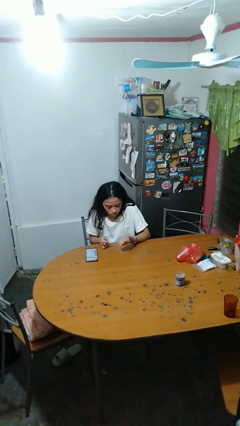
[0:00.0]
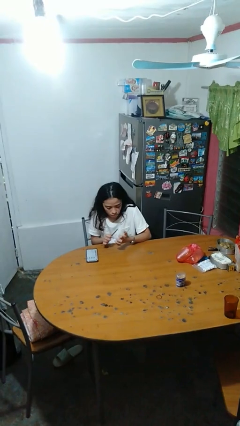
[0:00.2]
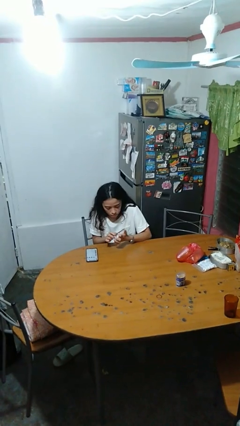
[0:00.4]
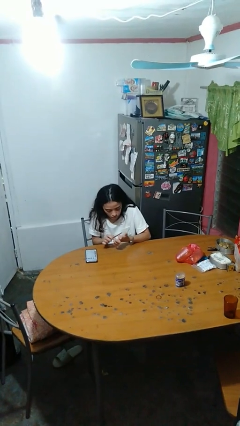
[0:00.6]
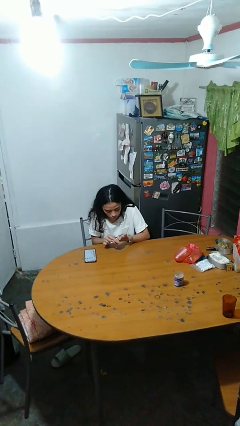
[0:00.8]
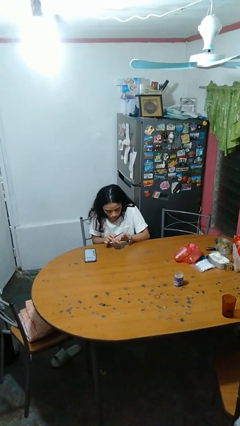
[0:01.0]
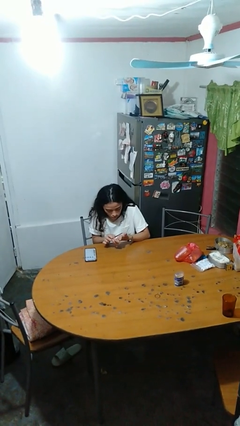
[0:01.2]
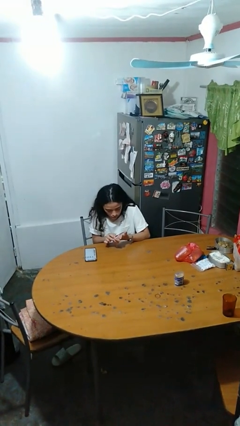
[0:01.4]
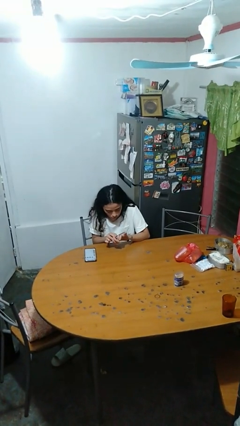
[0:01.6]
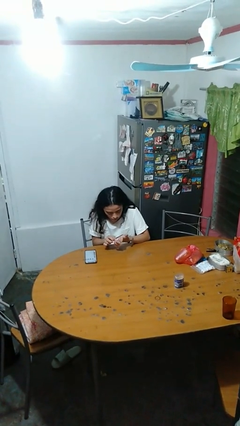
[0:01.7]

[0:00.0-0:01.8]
person files fingernails

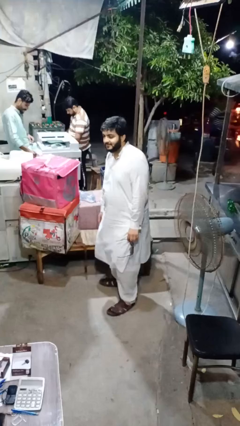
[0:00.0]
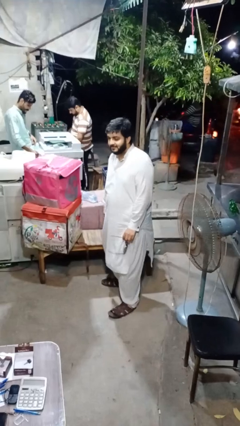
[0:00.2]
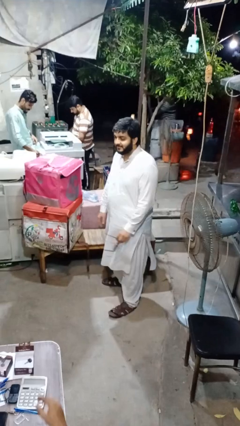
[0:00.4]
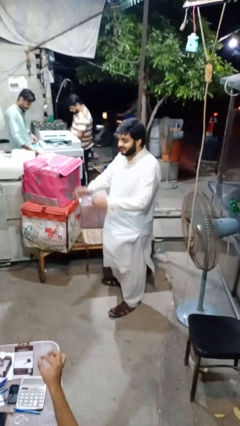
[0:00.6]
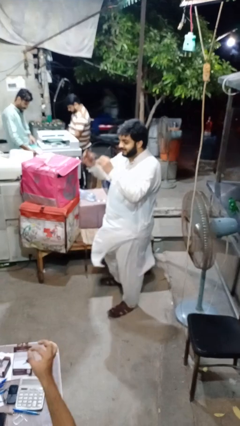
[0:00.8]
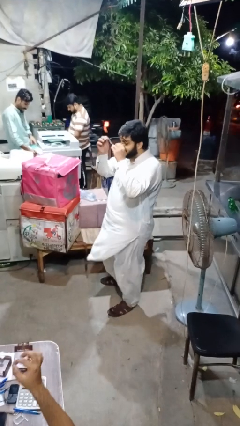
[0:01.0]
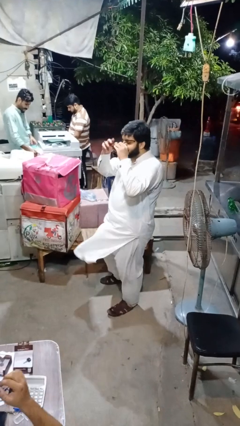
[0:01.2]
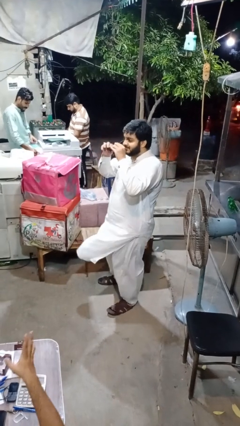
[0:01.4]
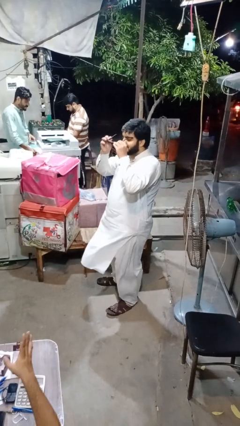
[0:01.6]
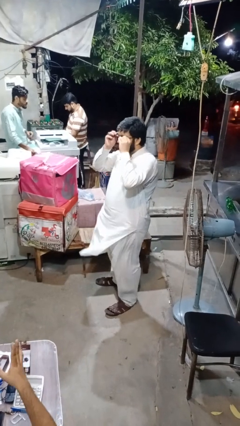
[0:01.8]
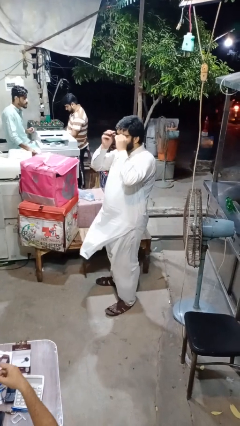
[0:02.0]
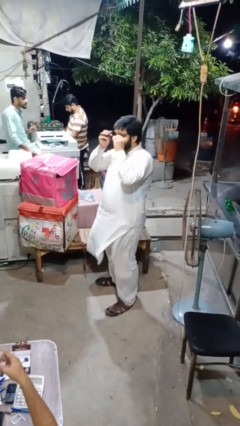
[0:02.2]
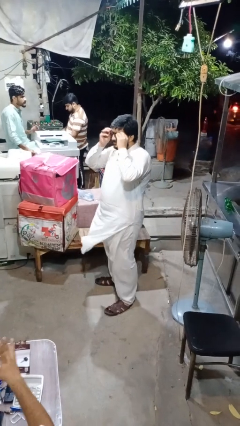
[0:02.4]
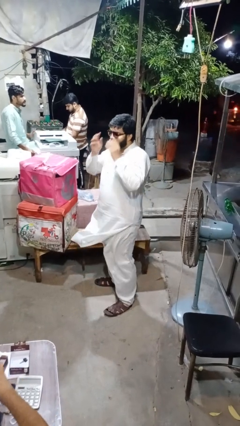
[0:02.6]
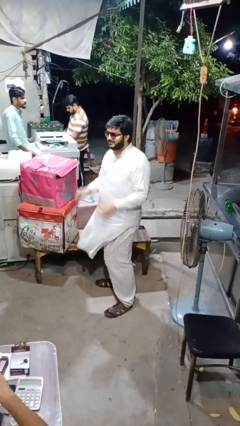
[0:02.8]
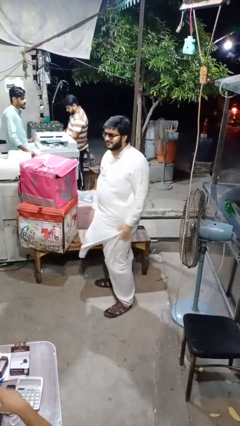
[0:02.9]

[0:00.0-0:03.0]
person puts on glasses

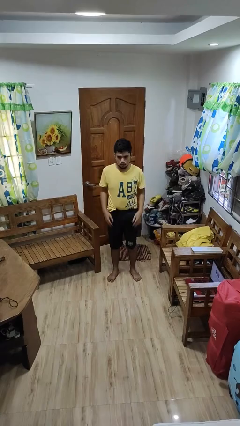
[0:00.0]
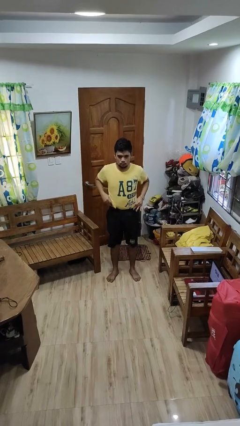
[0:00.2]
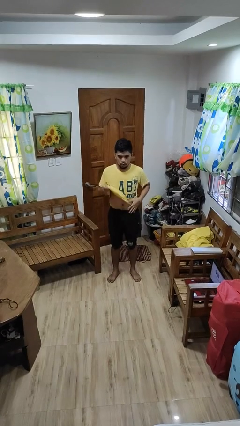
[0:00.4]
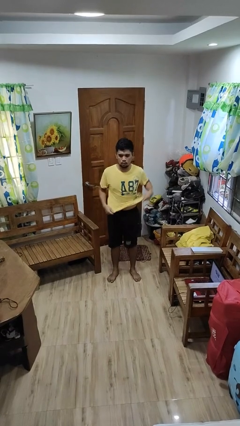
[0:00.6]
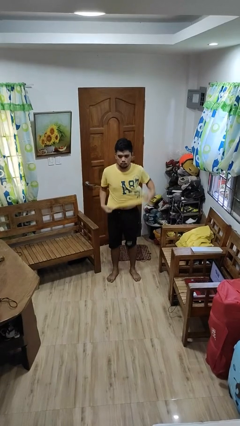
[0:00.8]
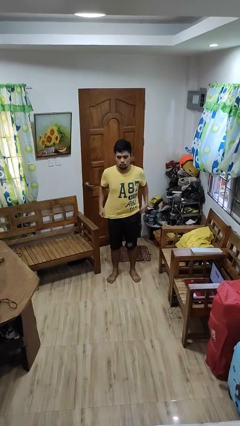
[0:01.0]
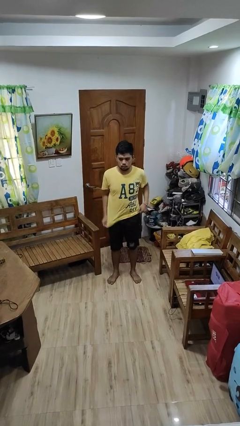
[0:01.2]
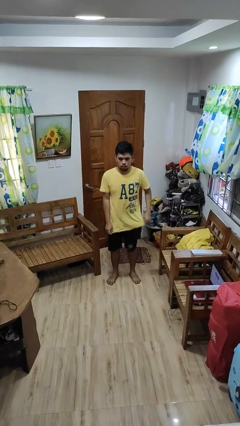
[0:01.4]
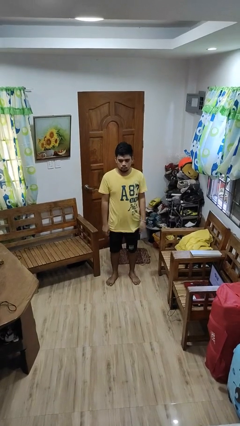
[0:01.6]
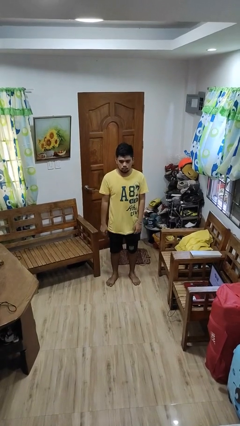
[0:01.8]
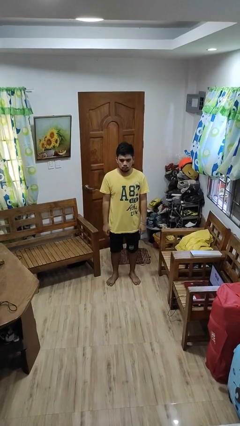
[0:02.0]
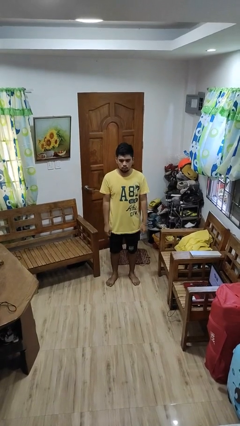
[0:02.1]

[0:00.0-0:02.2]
person untucks shirt

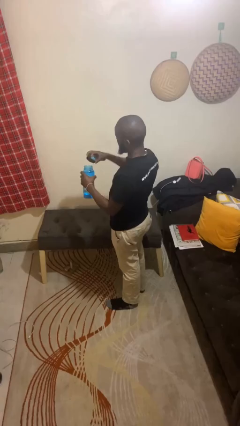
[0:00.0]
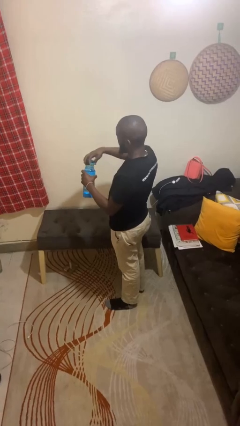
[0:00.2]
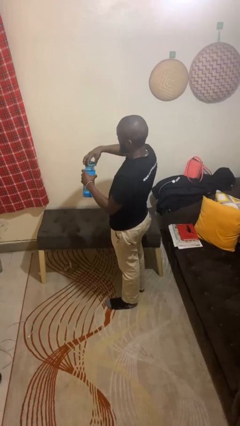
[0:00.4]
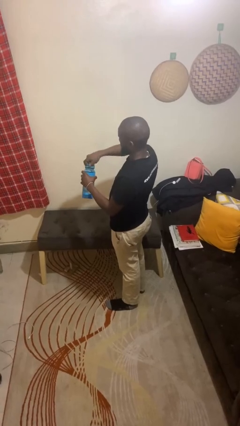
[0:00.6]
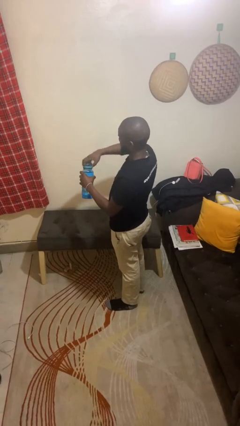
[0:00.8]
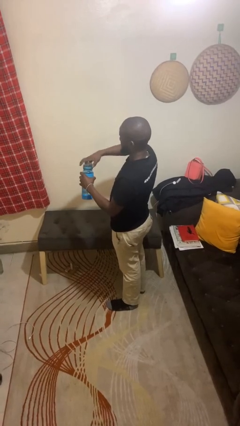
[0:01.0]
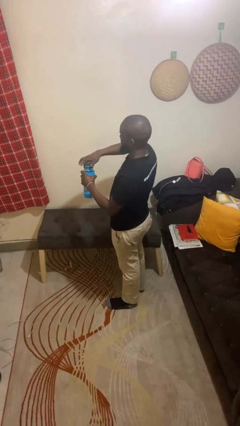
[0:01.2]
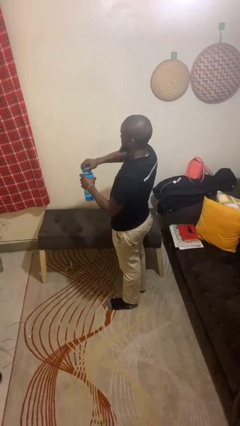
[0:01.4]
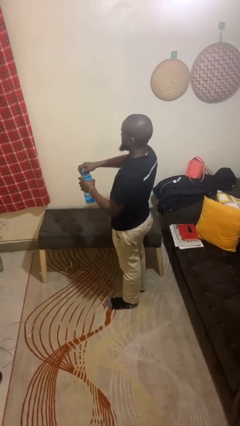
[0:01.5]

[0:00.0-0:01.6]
person closes jar

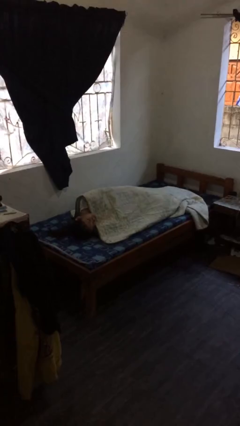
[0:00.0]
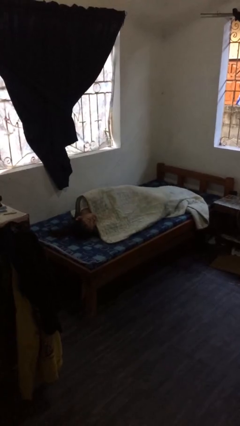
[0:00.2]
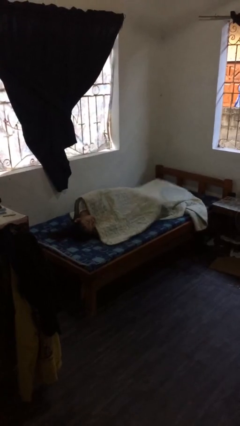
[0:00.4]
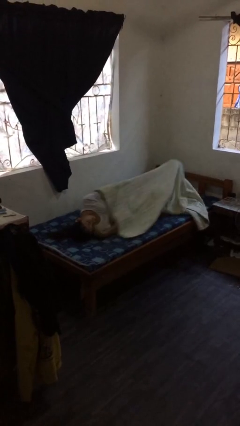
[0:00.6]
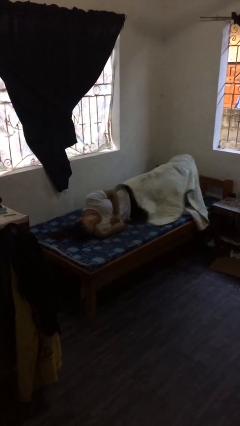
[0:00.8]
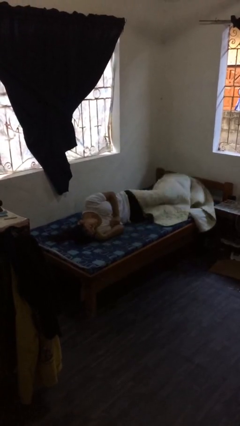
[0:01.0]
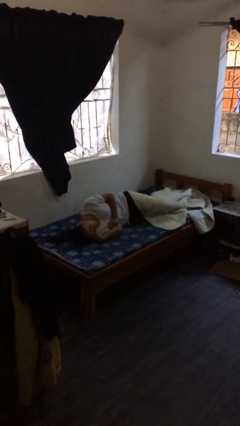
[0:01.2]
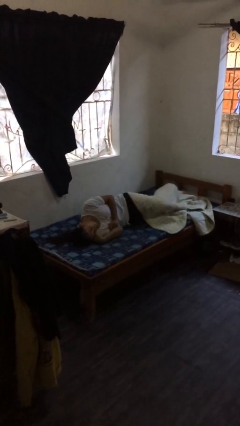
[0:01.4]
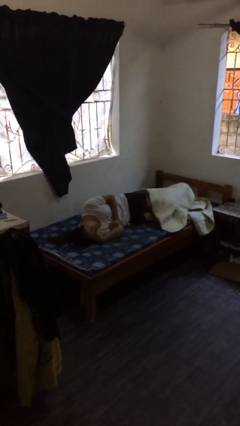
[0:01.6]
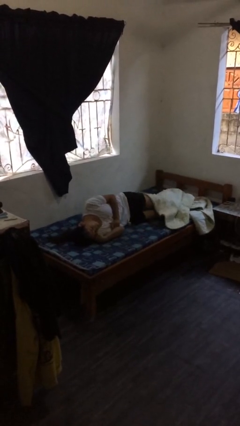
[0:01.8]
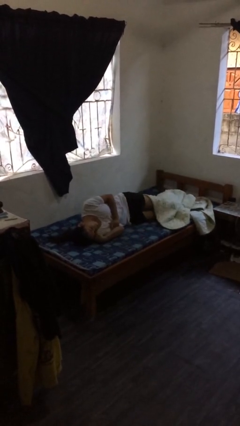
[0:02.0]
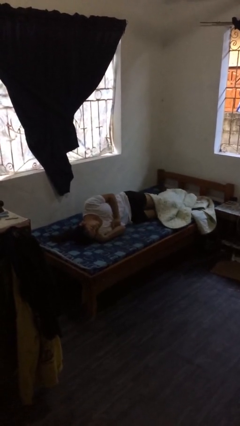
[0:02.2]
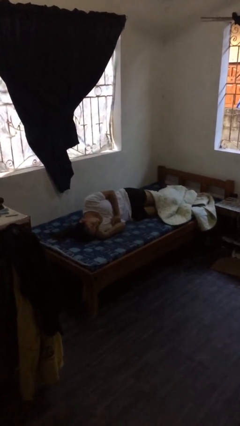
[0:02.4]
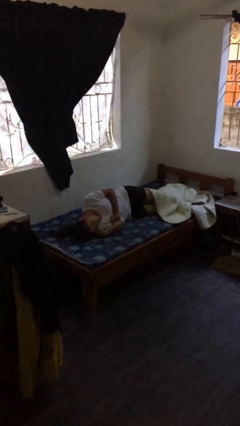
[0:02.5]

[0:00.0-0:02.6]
person uncovers with bedsheets

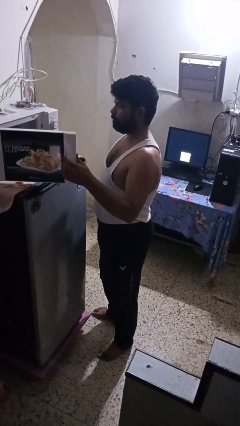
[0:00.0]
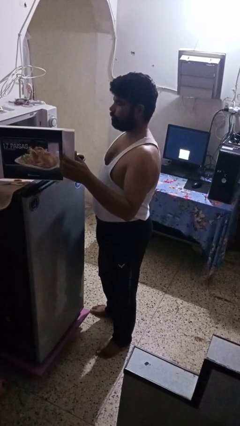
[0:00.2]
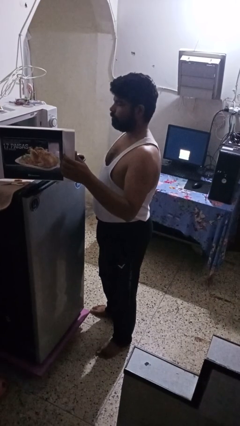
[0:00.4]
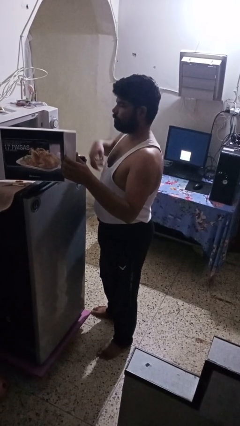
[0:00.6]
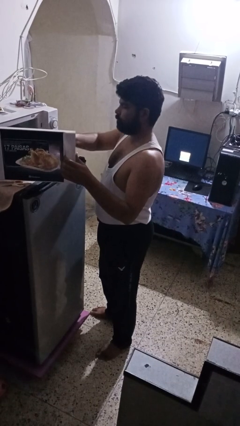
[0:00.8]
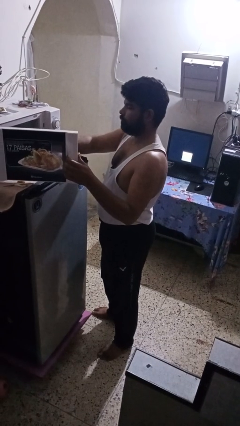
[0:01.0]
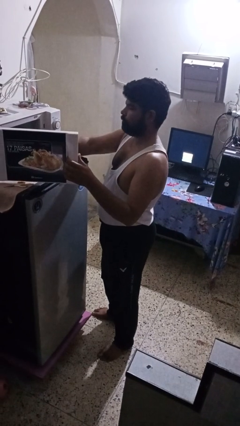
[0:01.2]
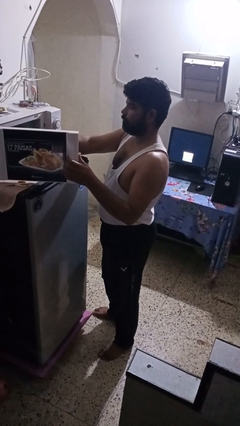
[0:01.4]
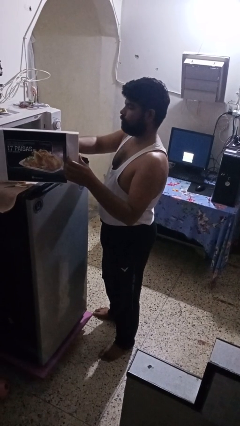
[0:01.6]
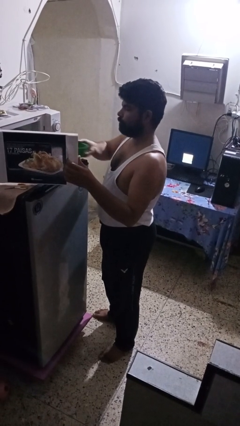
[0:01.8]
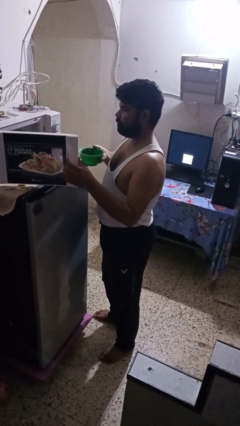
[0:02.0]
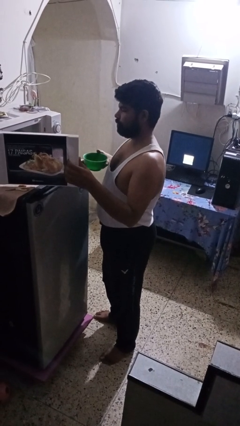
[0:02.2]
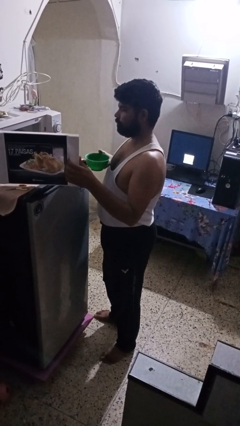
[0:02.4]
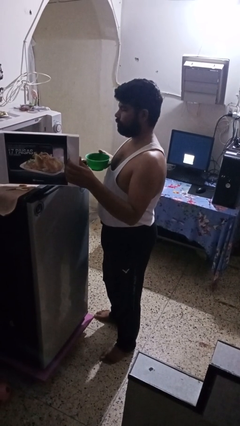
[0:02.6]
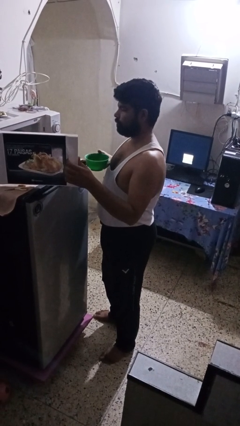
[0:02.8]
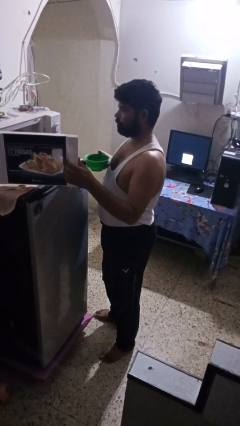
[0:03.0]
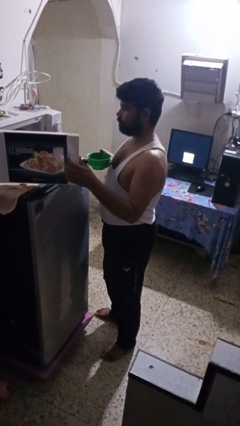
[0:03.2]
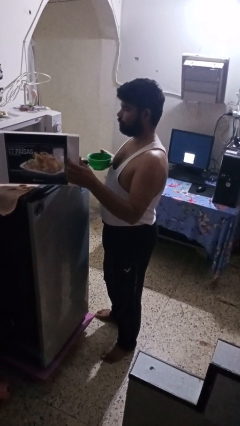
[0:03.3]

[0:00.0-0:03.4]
person takes object from microwave

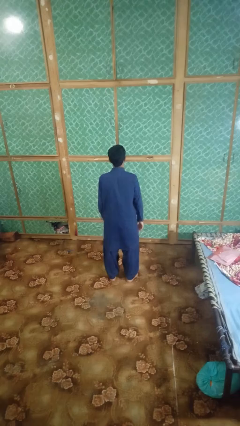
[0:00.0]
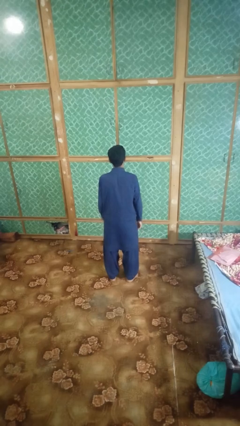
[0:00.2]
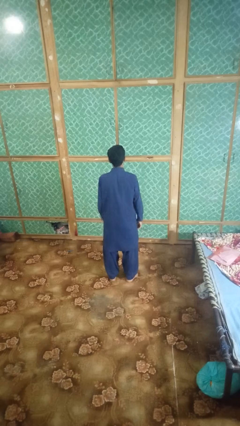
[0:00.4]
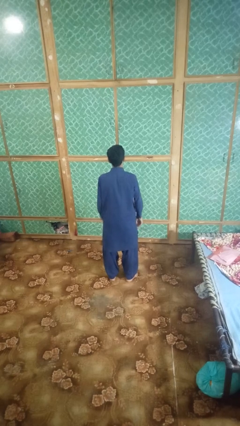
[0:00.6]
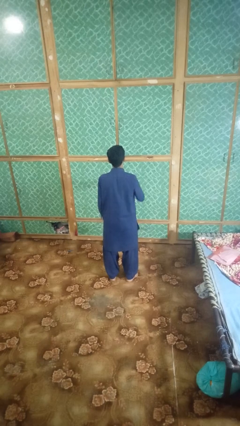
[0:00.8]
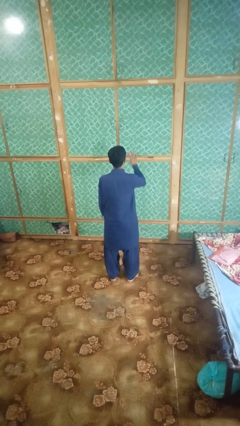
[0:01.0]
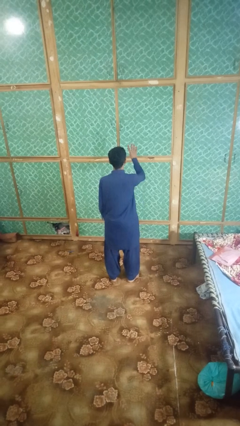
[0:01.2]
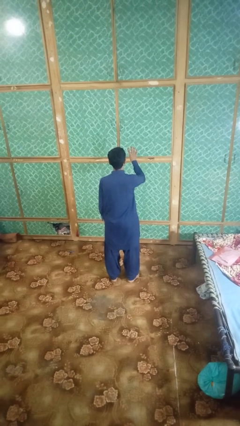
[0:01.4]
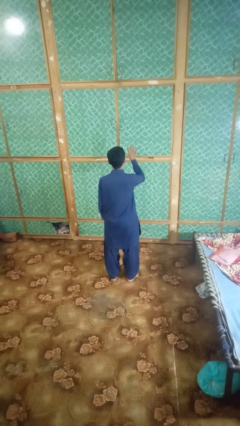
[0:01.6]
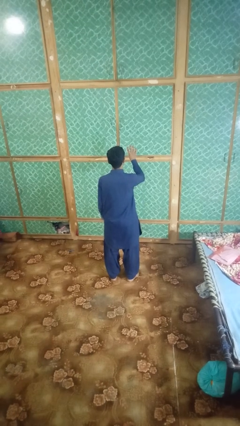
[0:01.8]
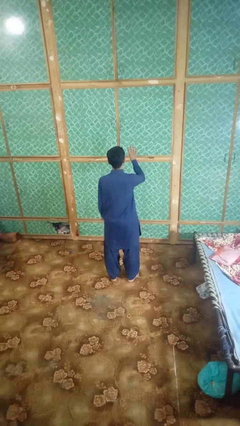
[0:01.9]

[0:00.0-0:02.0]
person gestures number four

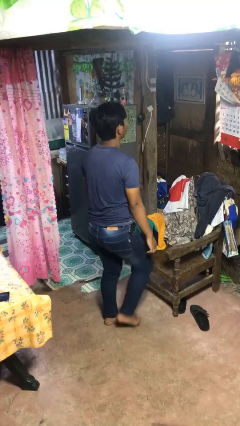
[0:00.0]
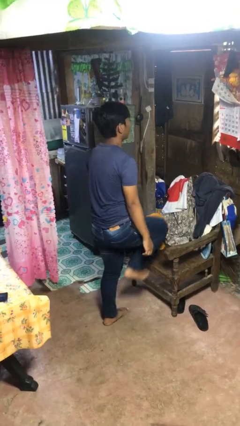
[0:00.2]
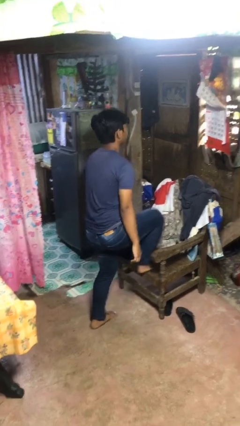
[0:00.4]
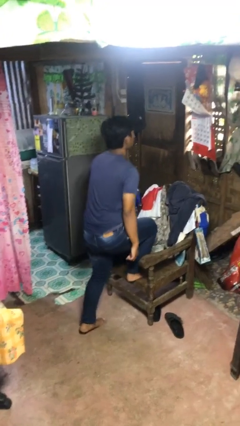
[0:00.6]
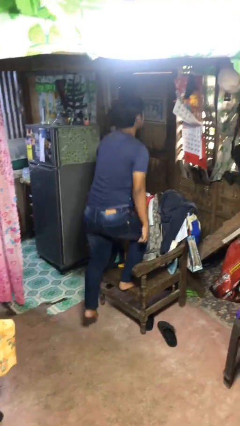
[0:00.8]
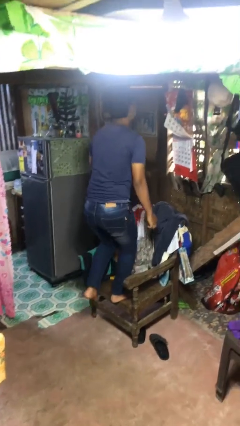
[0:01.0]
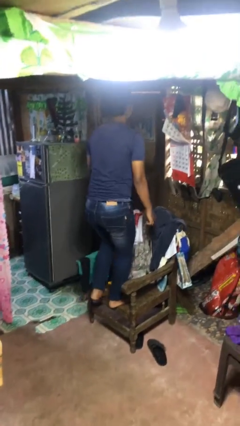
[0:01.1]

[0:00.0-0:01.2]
person climbs on chair
